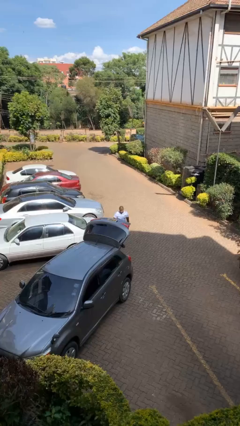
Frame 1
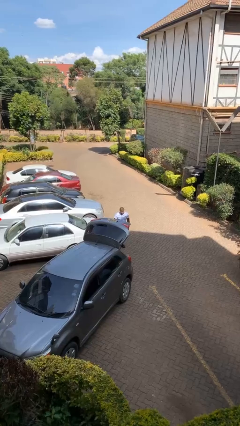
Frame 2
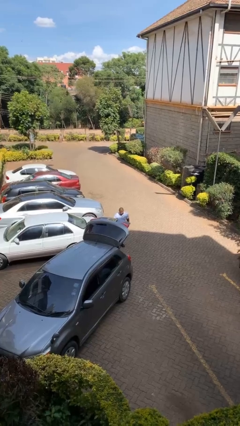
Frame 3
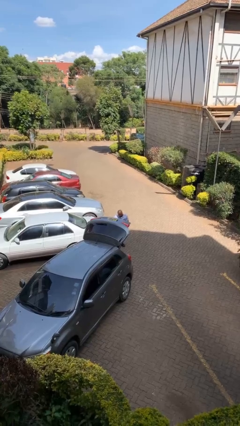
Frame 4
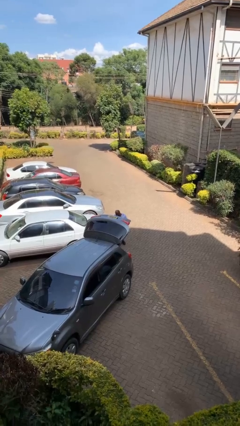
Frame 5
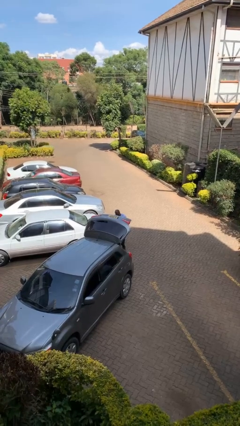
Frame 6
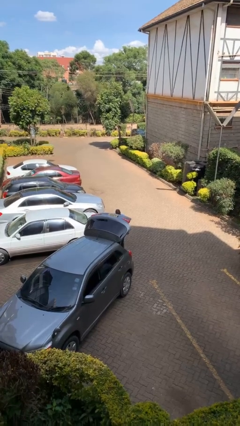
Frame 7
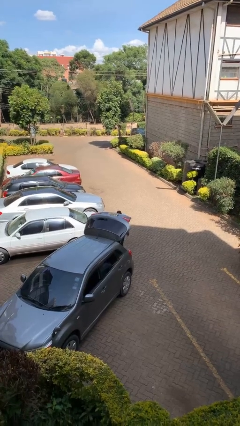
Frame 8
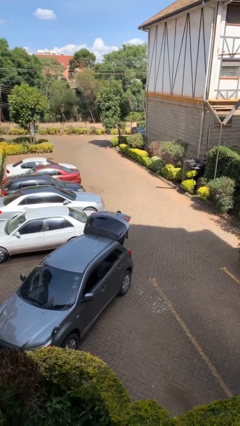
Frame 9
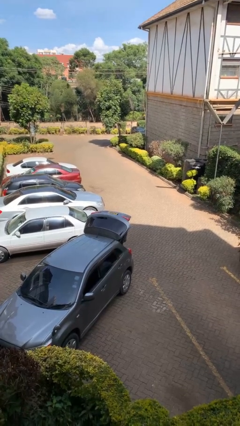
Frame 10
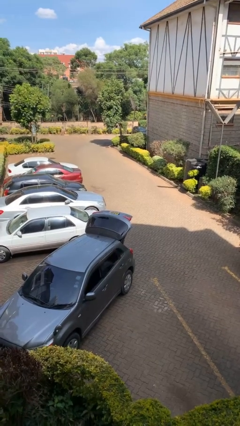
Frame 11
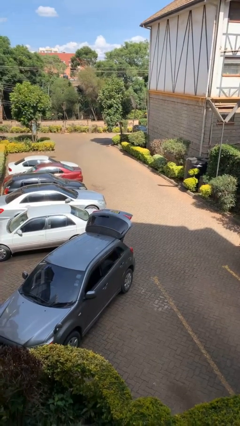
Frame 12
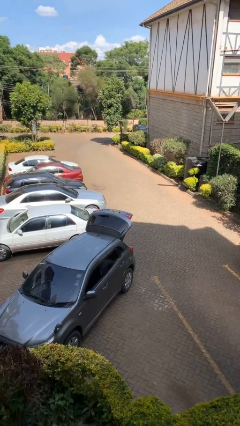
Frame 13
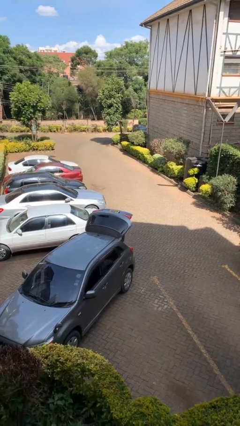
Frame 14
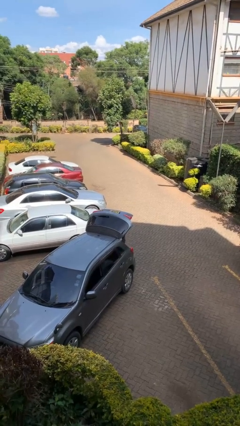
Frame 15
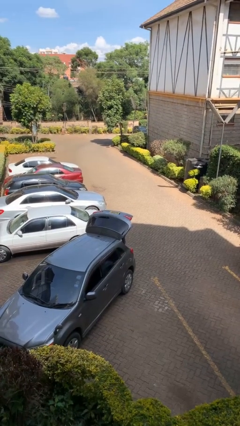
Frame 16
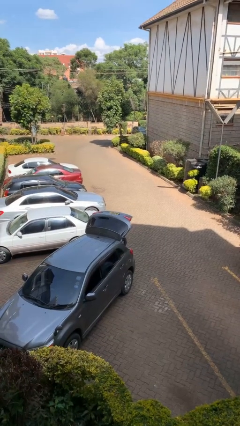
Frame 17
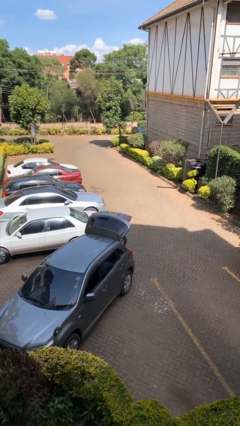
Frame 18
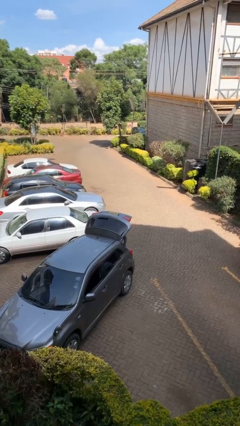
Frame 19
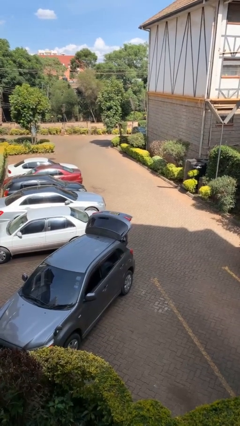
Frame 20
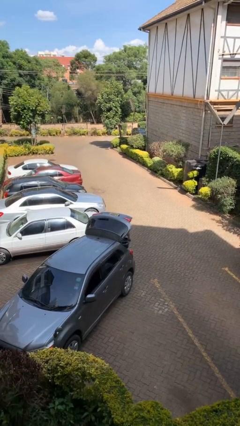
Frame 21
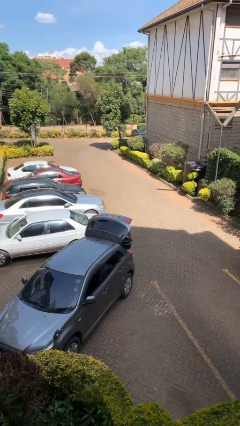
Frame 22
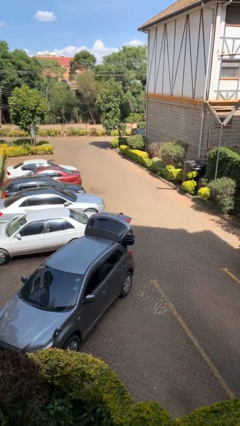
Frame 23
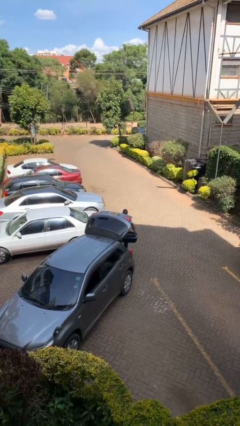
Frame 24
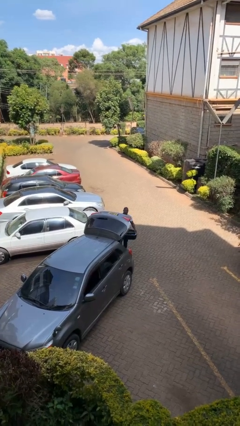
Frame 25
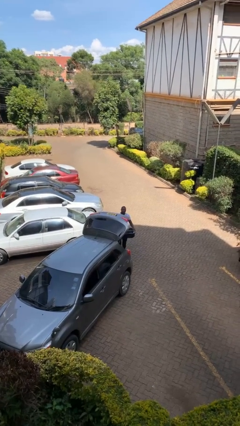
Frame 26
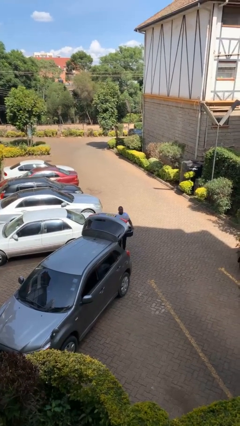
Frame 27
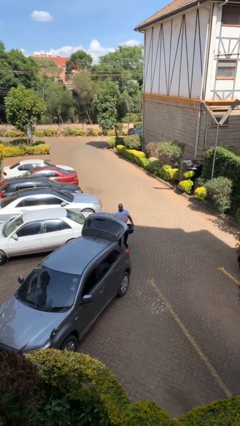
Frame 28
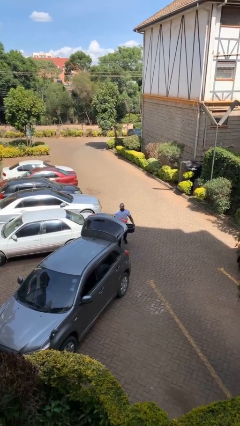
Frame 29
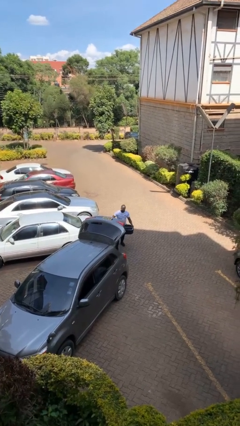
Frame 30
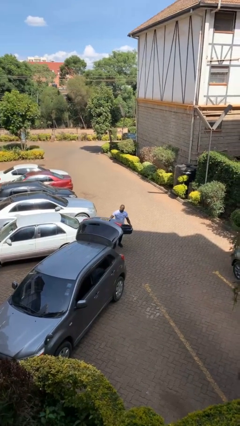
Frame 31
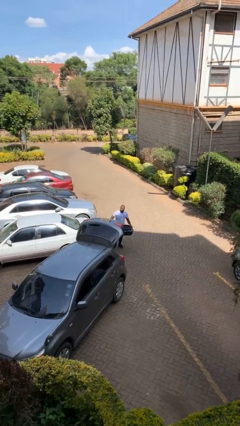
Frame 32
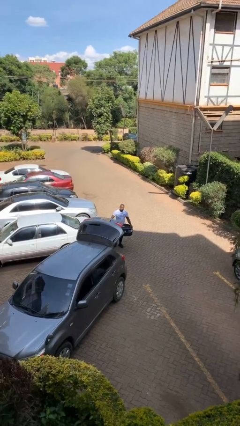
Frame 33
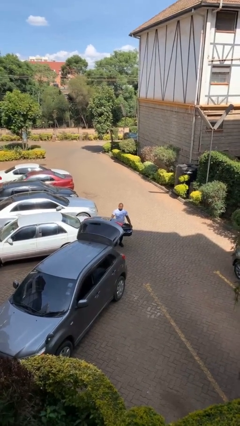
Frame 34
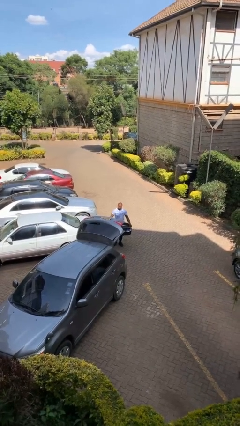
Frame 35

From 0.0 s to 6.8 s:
person unloads car

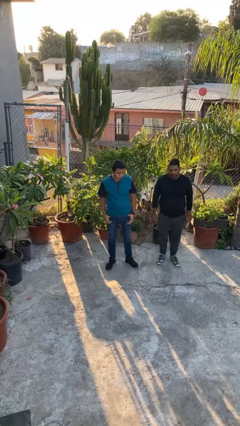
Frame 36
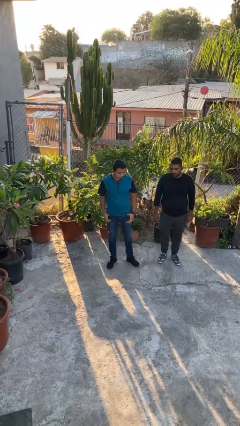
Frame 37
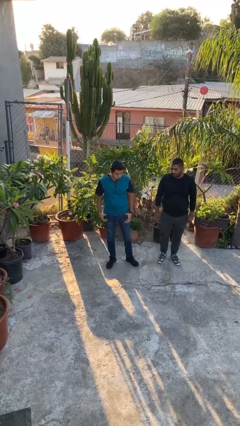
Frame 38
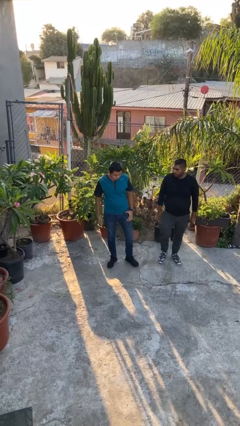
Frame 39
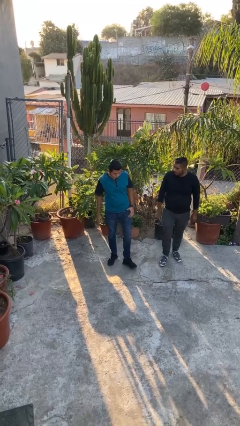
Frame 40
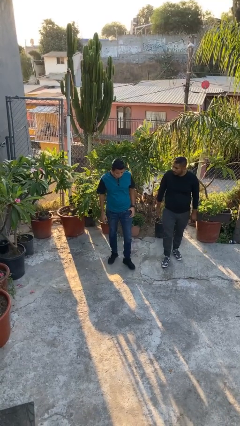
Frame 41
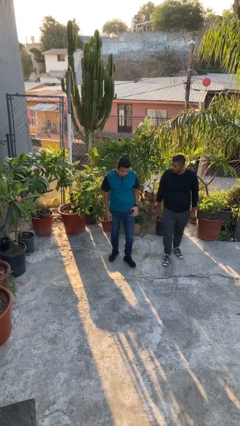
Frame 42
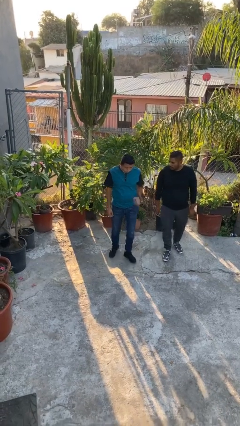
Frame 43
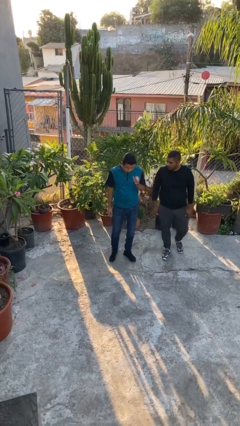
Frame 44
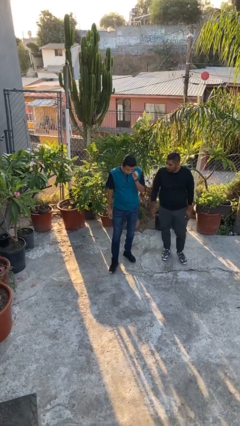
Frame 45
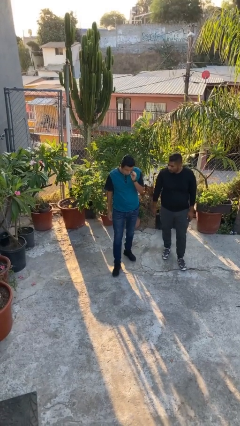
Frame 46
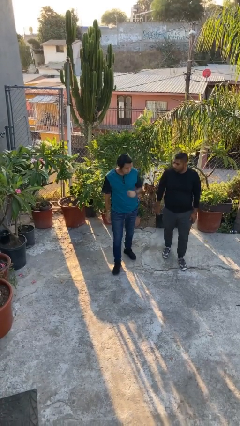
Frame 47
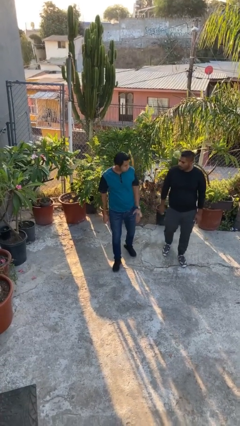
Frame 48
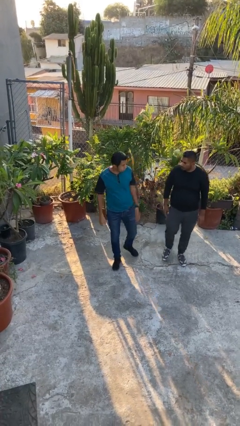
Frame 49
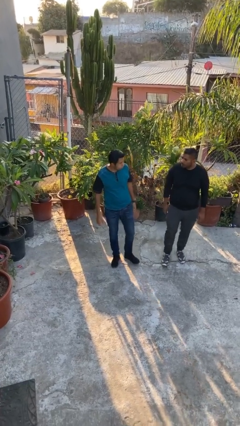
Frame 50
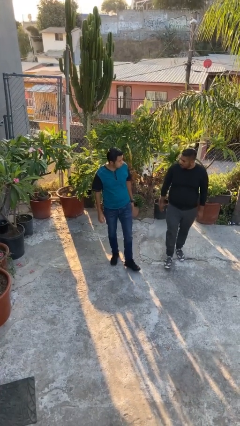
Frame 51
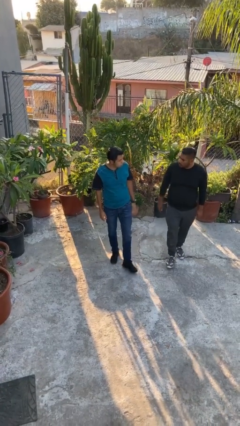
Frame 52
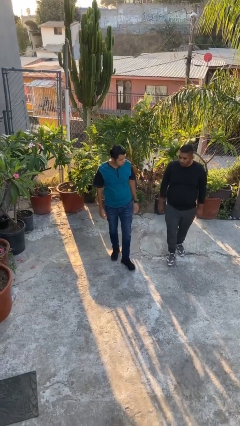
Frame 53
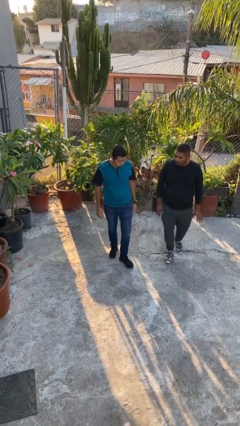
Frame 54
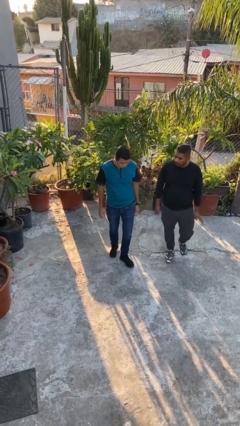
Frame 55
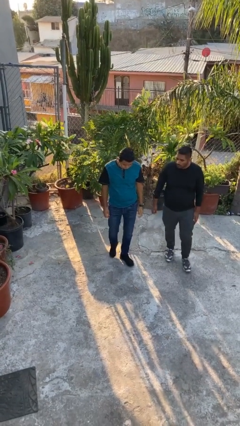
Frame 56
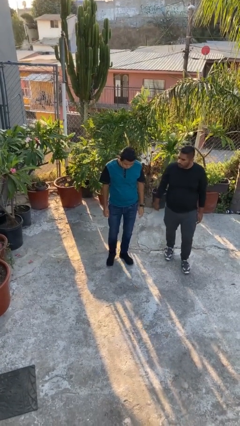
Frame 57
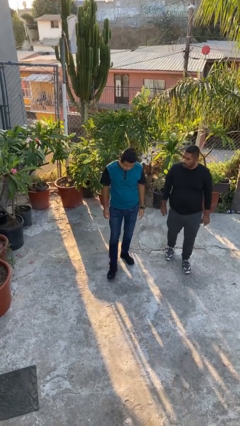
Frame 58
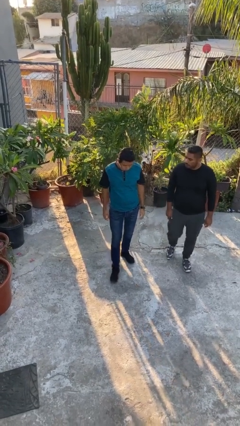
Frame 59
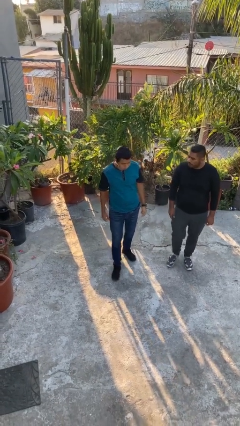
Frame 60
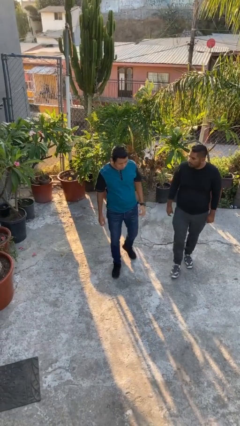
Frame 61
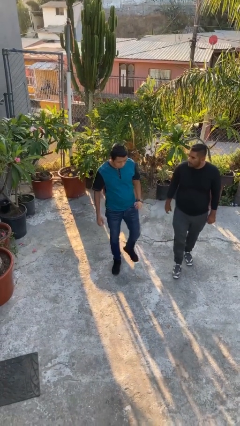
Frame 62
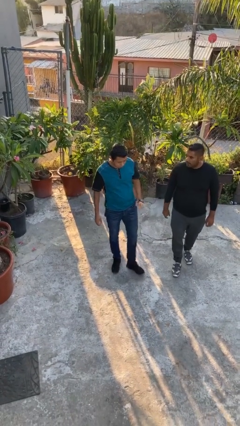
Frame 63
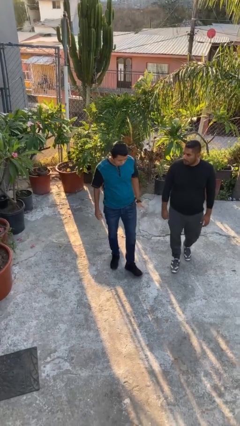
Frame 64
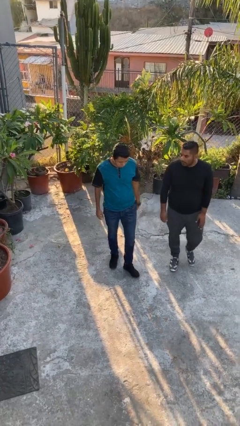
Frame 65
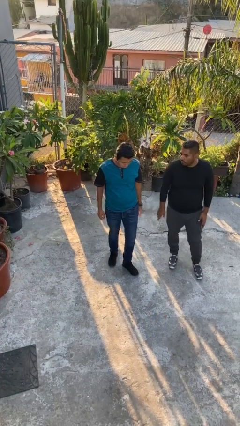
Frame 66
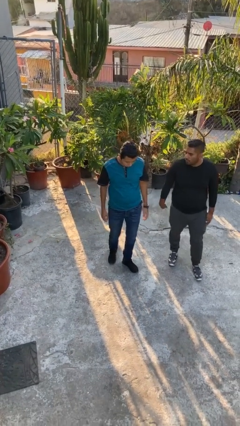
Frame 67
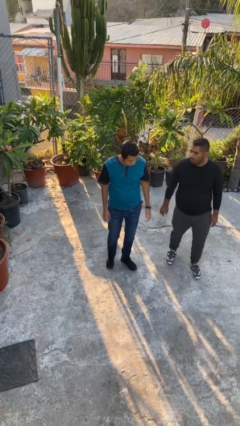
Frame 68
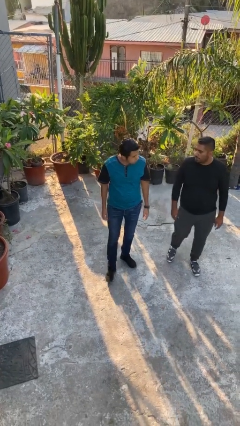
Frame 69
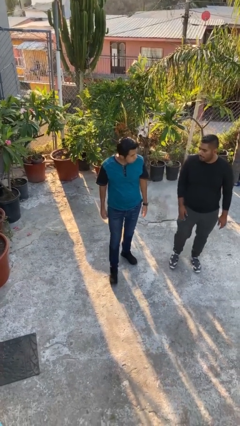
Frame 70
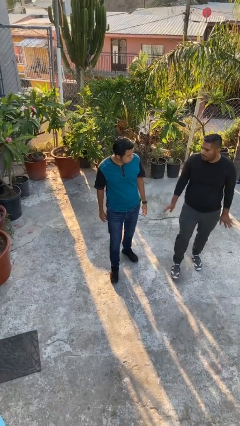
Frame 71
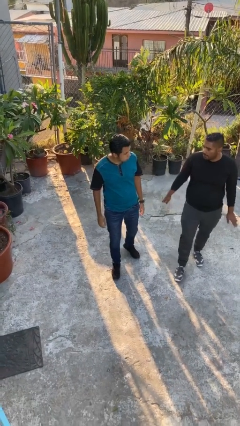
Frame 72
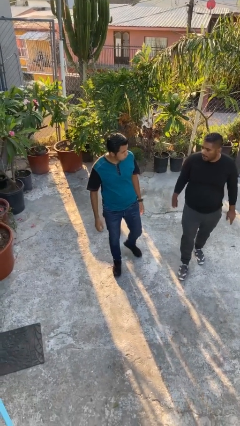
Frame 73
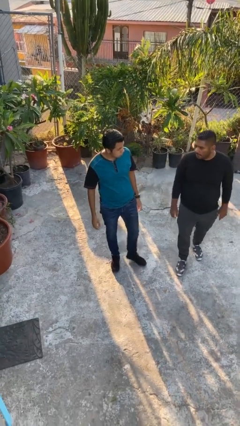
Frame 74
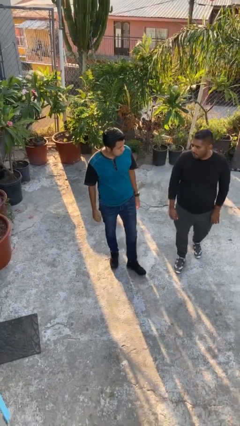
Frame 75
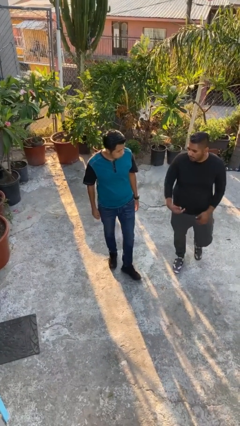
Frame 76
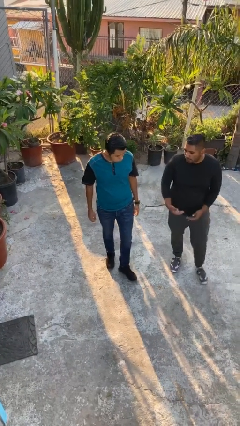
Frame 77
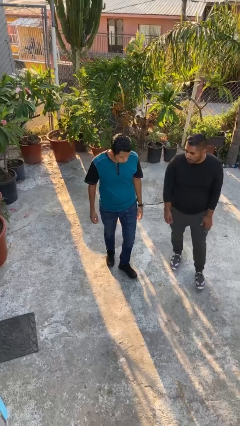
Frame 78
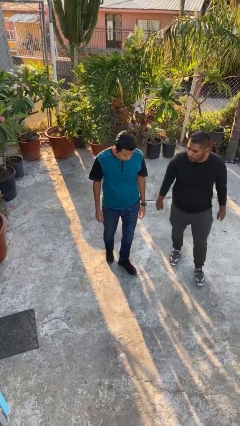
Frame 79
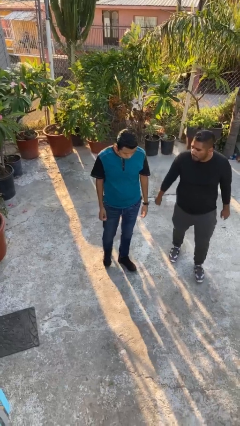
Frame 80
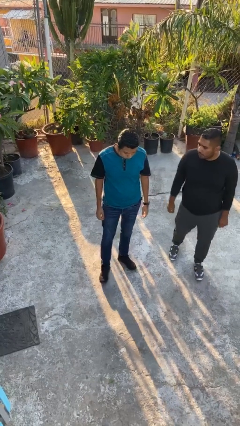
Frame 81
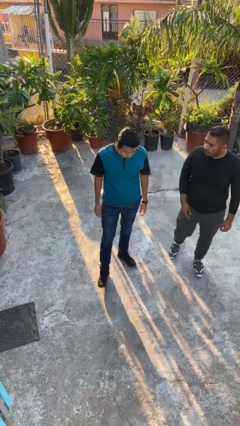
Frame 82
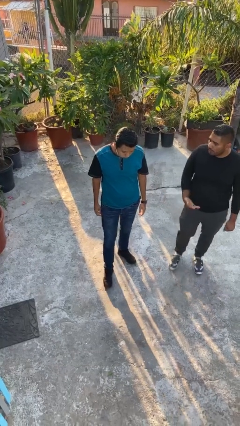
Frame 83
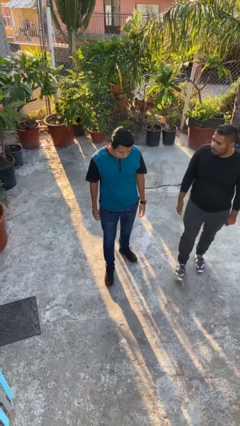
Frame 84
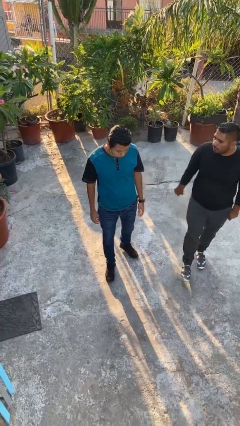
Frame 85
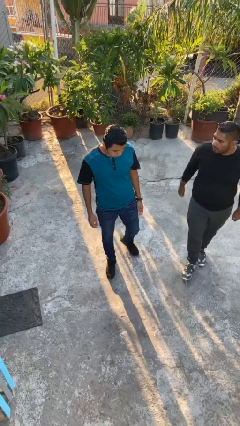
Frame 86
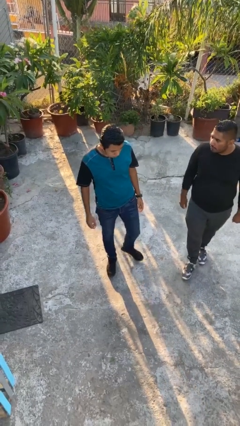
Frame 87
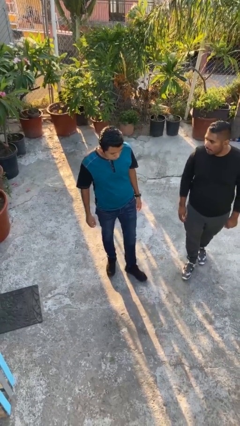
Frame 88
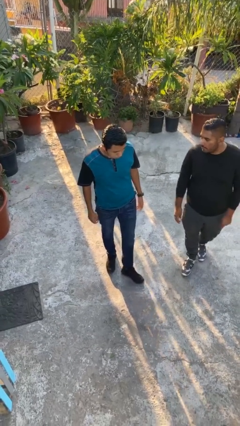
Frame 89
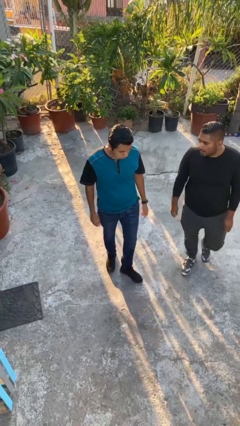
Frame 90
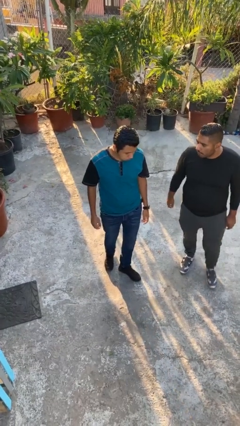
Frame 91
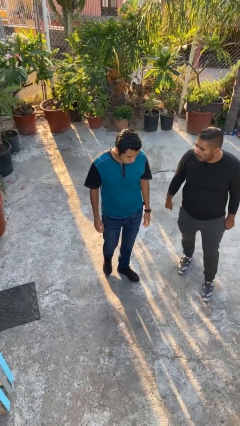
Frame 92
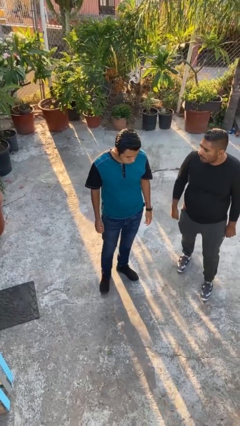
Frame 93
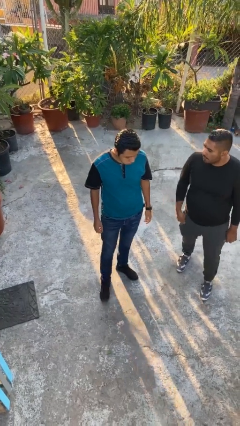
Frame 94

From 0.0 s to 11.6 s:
person talks to person
